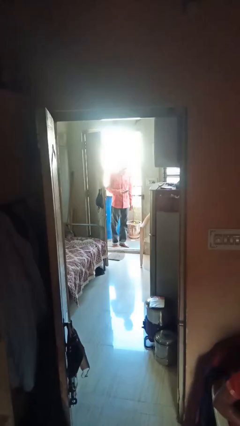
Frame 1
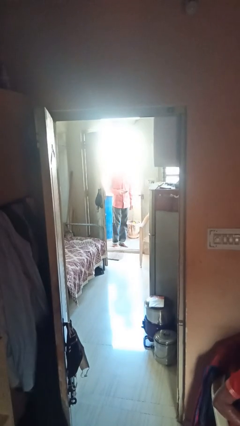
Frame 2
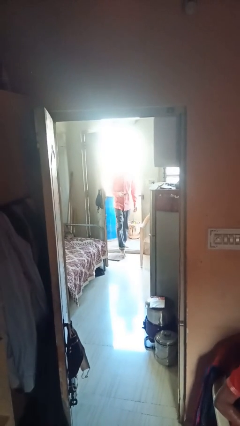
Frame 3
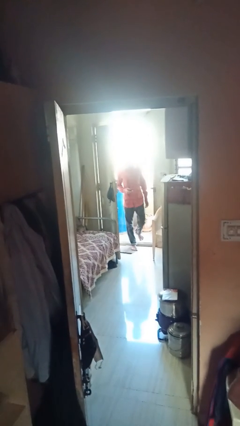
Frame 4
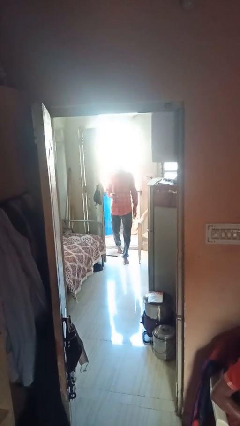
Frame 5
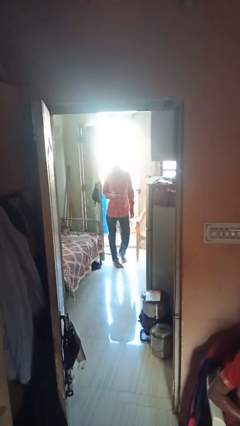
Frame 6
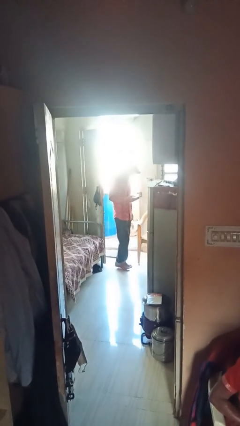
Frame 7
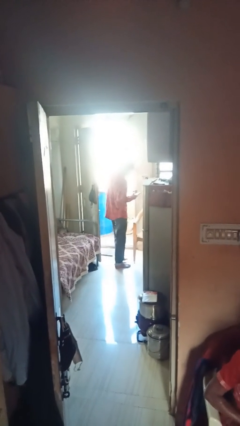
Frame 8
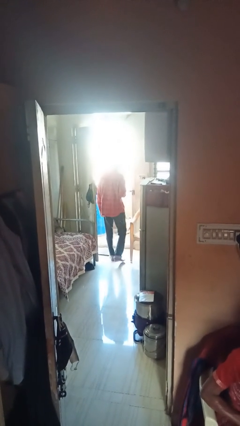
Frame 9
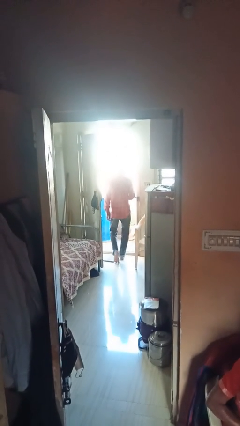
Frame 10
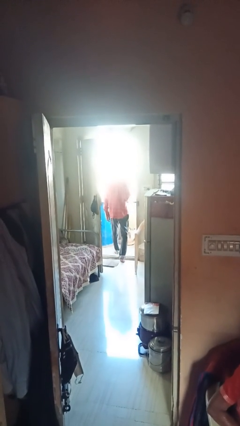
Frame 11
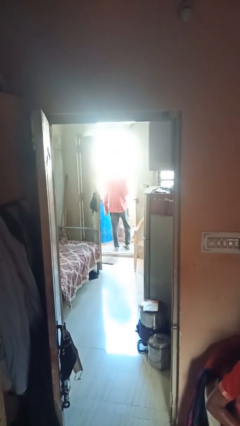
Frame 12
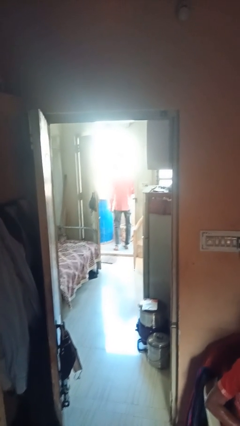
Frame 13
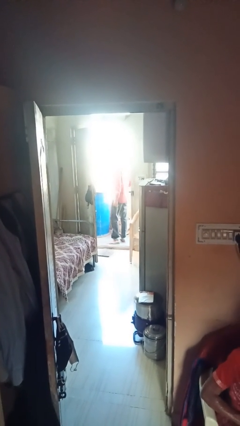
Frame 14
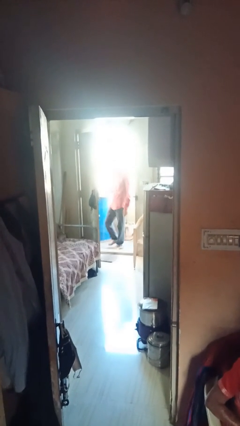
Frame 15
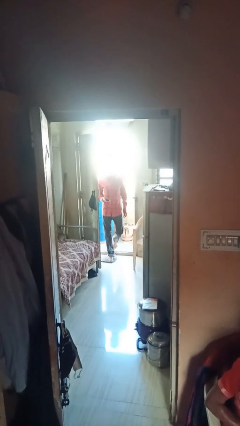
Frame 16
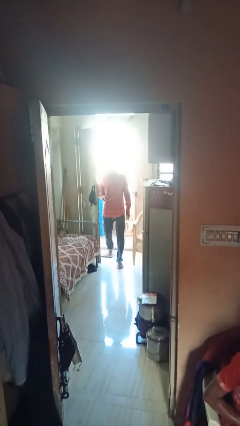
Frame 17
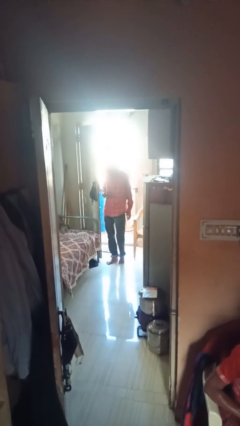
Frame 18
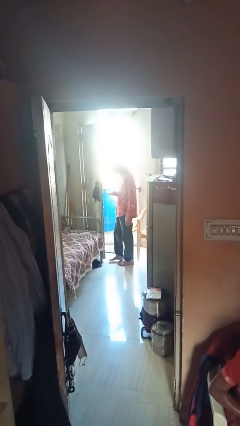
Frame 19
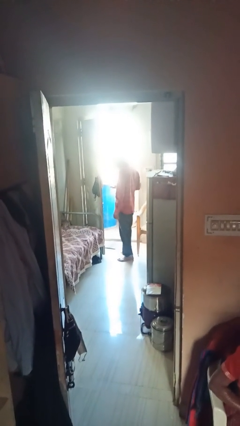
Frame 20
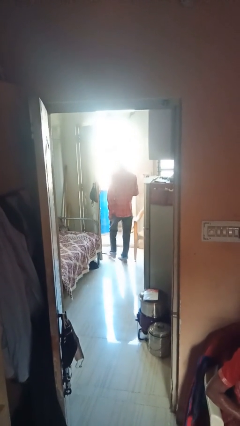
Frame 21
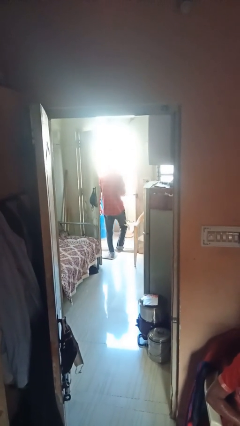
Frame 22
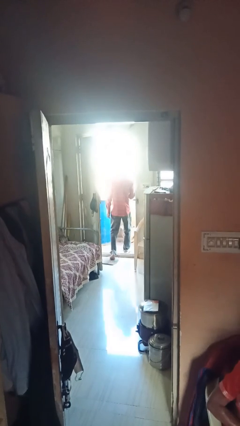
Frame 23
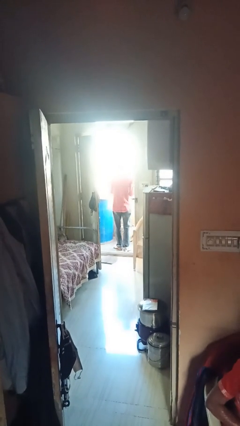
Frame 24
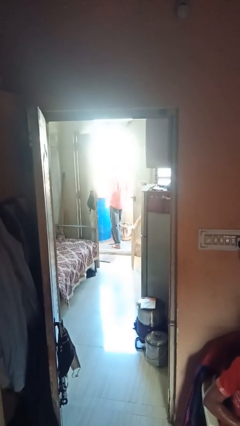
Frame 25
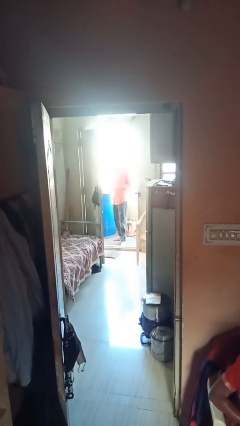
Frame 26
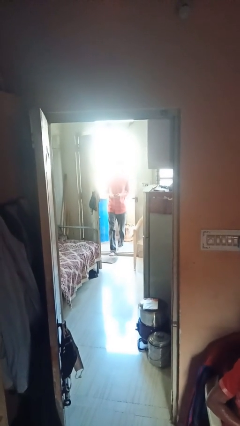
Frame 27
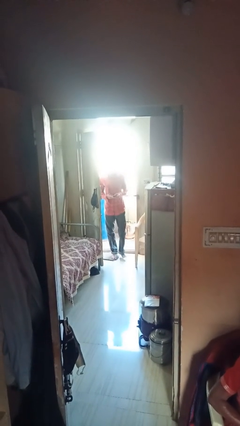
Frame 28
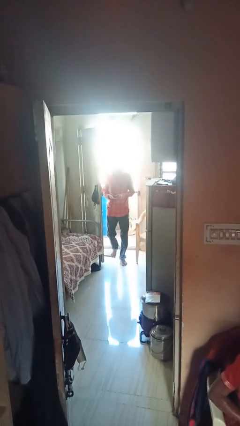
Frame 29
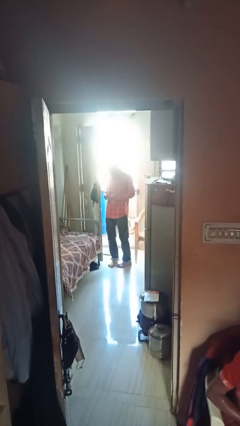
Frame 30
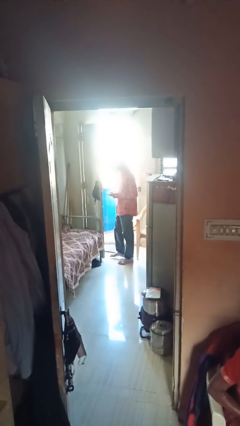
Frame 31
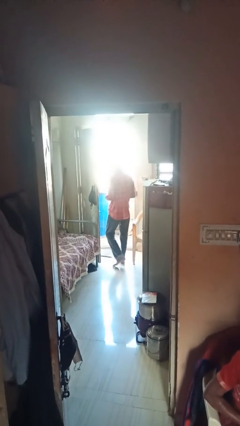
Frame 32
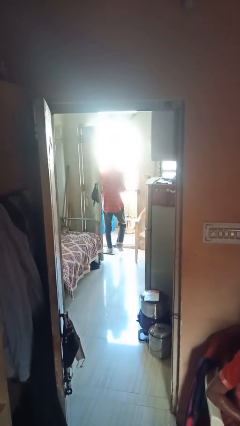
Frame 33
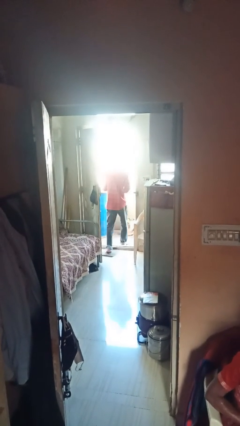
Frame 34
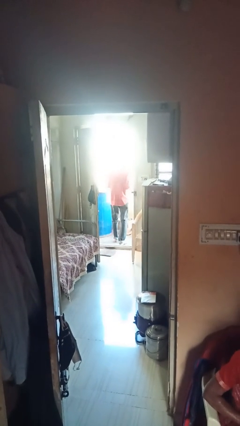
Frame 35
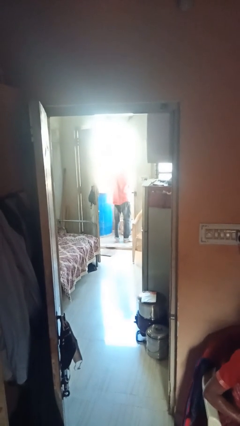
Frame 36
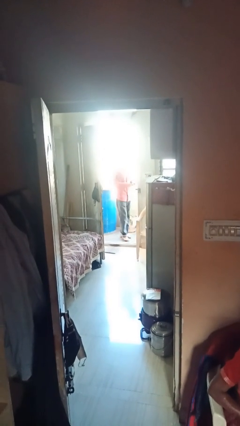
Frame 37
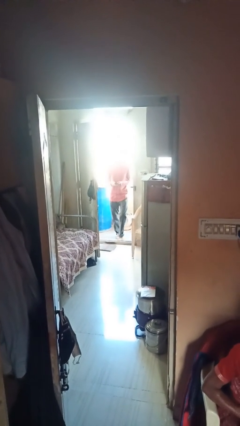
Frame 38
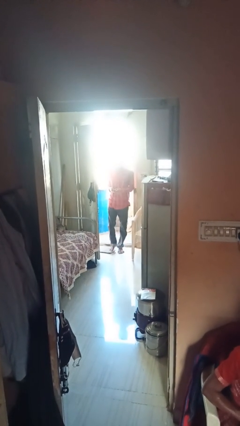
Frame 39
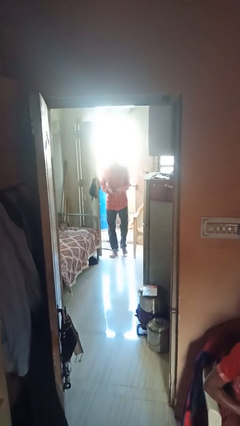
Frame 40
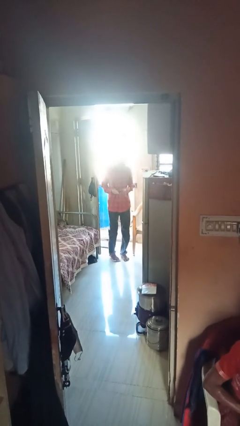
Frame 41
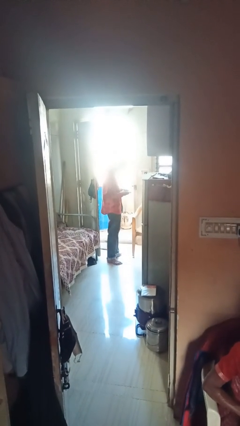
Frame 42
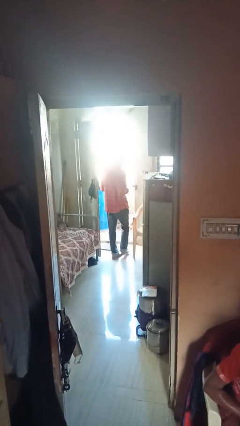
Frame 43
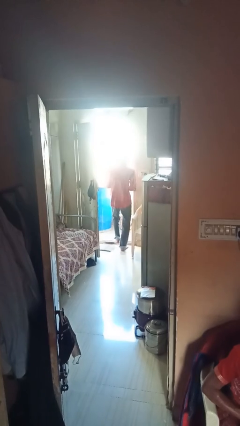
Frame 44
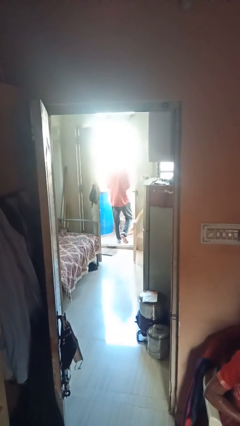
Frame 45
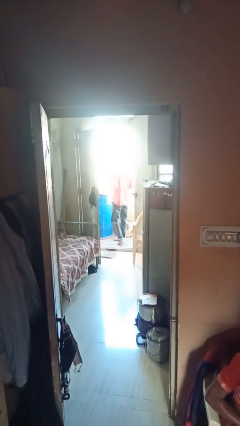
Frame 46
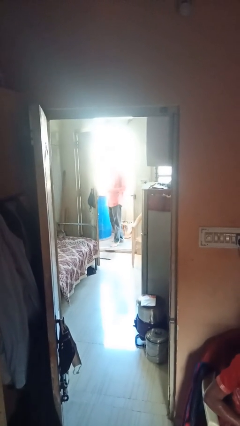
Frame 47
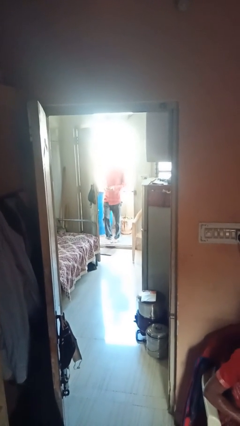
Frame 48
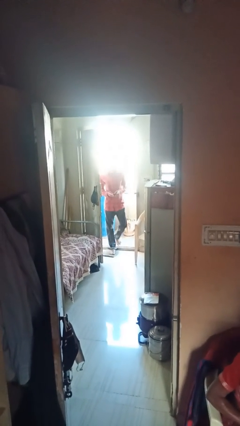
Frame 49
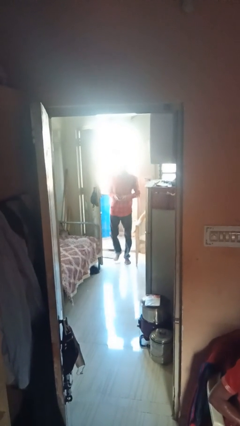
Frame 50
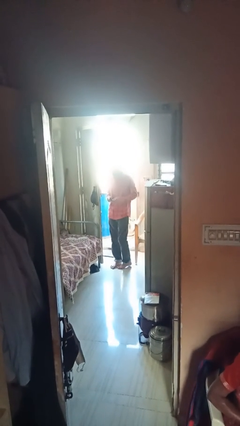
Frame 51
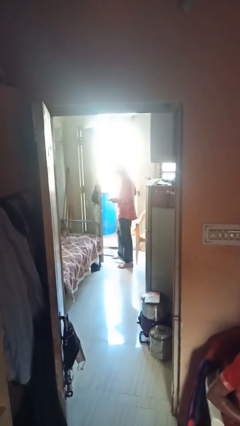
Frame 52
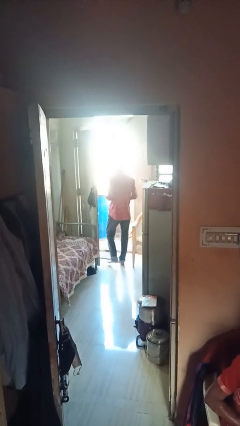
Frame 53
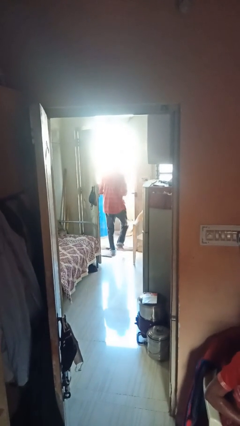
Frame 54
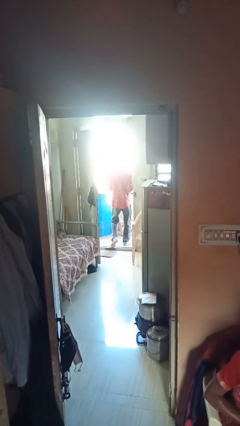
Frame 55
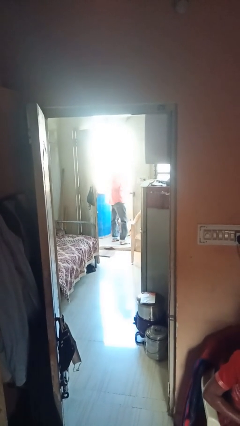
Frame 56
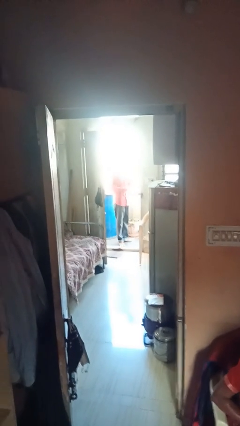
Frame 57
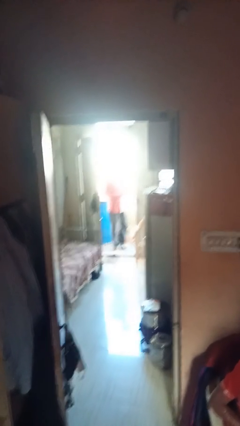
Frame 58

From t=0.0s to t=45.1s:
person texts on phone

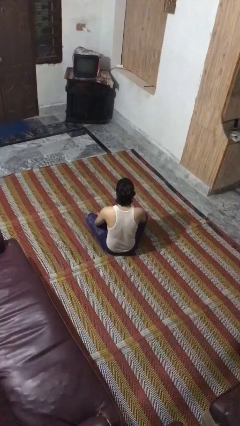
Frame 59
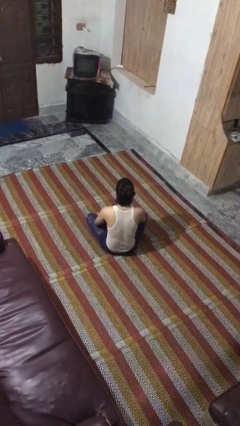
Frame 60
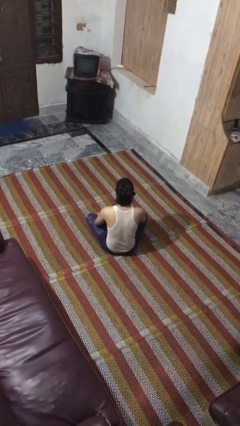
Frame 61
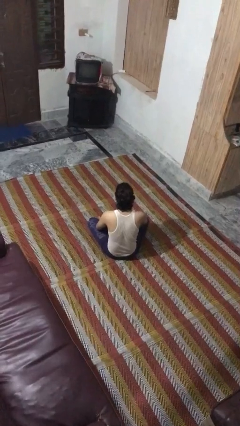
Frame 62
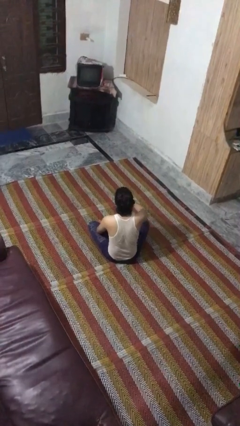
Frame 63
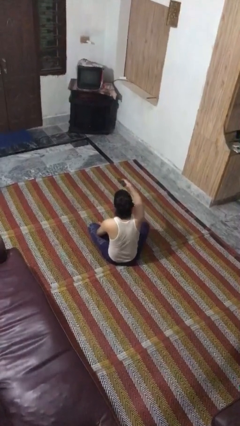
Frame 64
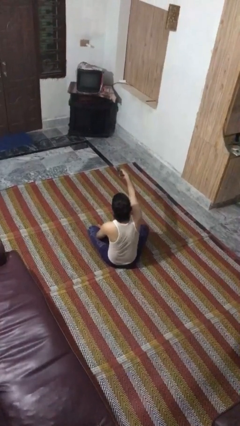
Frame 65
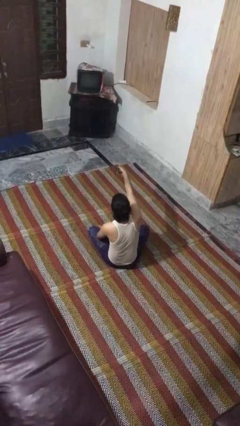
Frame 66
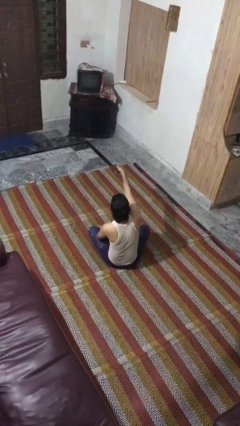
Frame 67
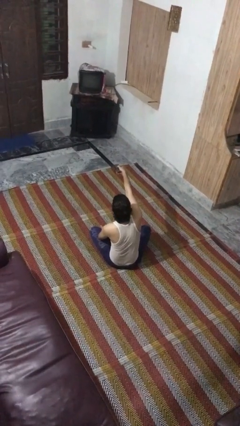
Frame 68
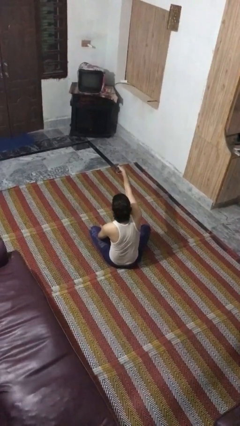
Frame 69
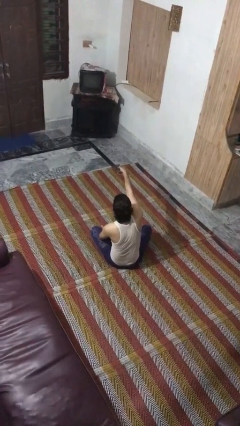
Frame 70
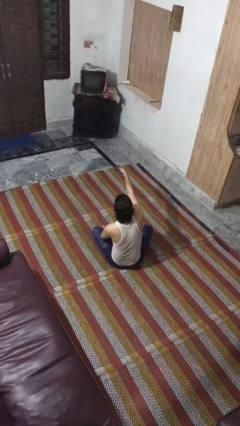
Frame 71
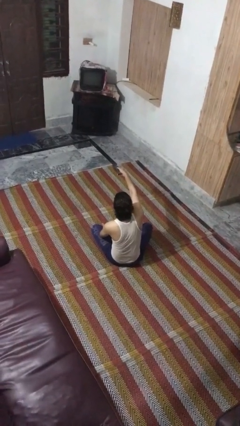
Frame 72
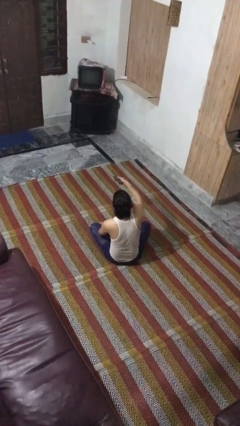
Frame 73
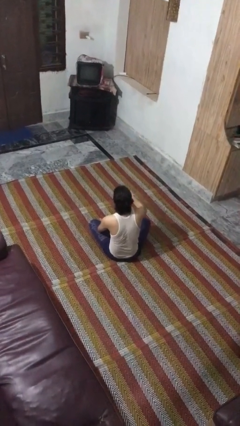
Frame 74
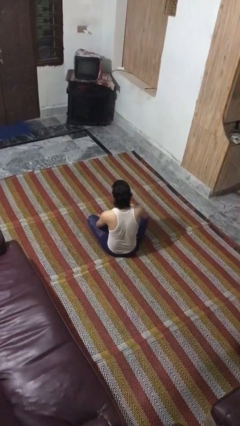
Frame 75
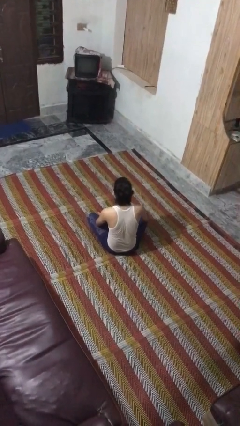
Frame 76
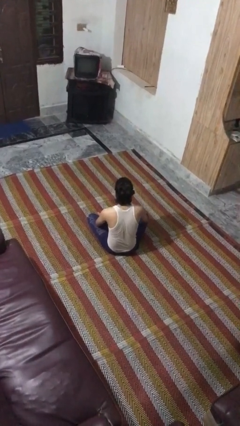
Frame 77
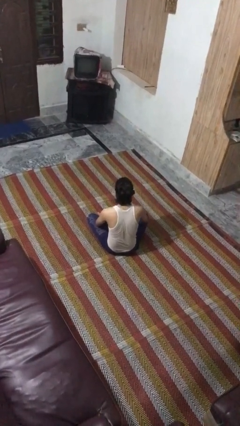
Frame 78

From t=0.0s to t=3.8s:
person uses television remote

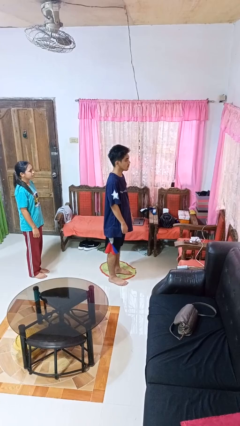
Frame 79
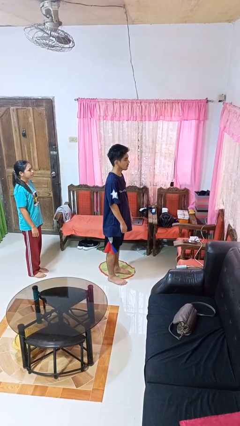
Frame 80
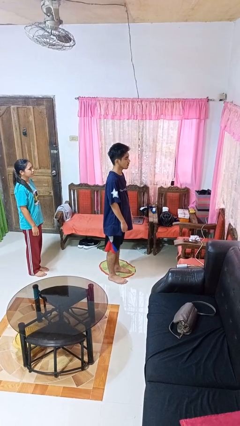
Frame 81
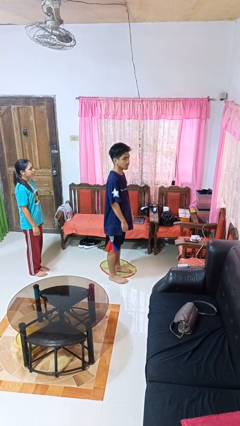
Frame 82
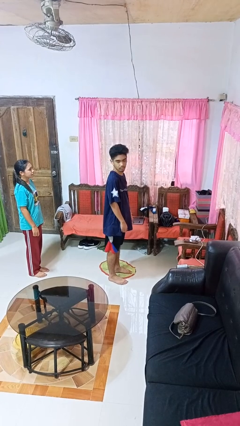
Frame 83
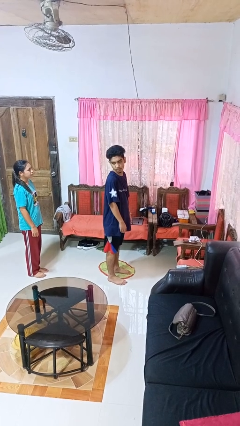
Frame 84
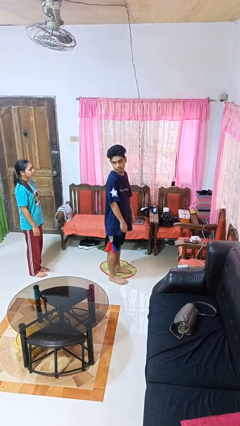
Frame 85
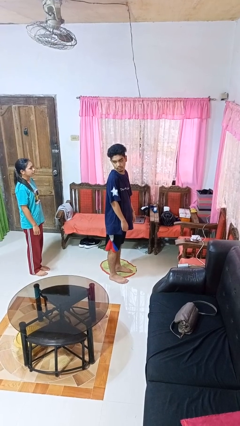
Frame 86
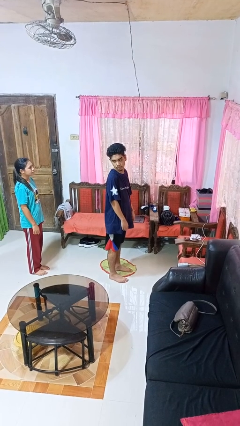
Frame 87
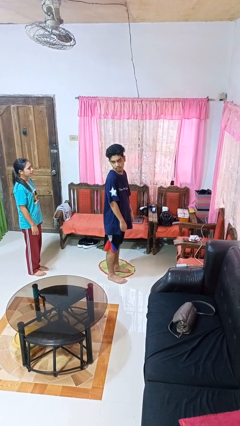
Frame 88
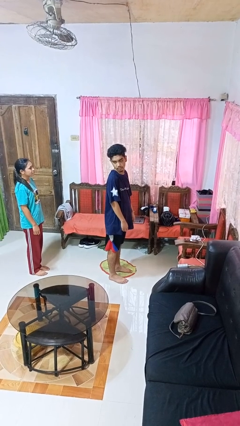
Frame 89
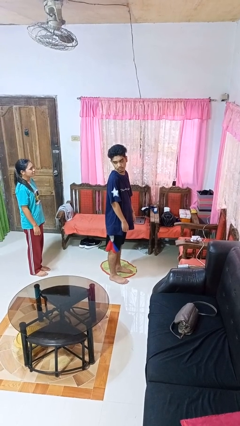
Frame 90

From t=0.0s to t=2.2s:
person looks over shoulder

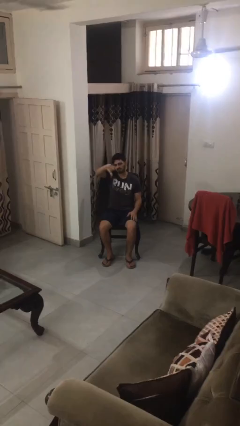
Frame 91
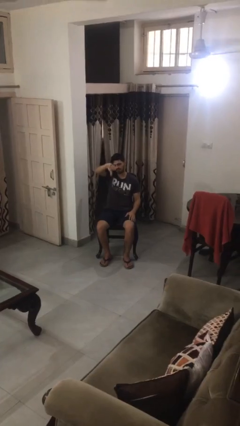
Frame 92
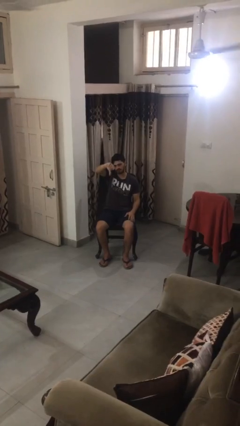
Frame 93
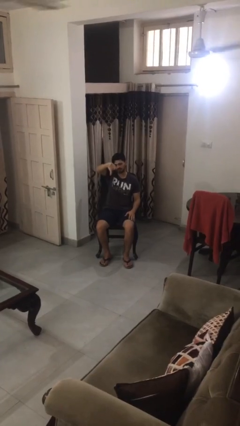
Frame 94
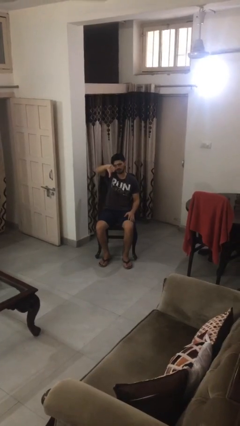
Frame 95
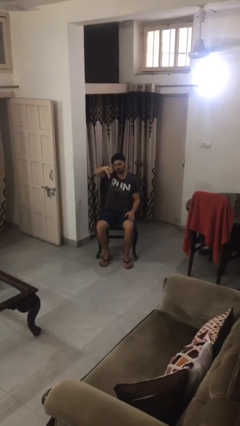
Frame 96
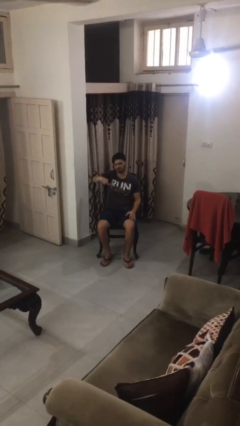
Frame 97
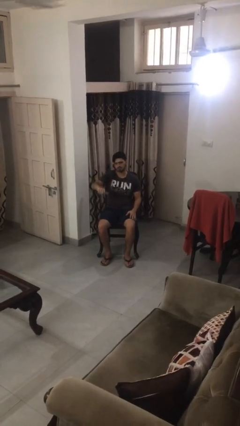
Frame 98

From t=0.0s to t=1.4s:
person gestures thumbs down
